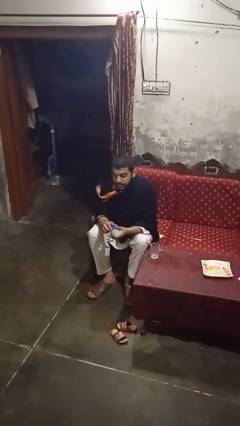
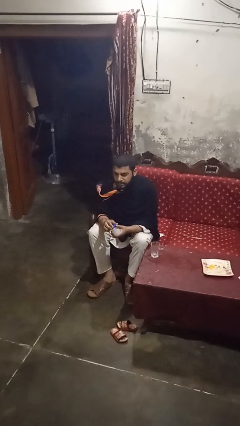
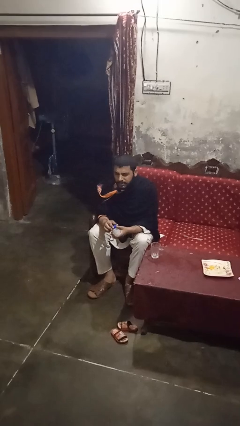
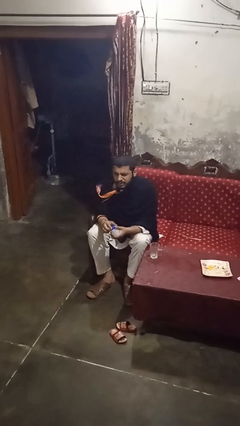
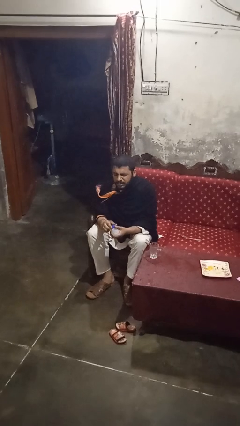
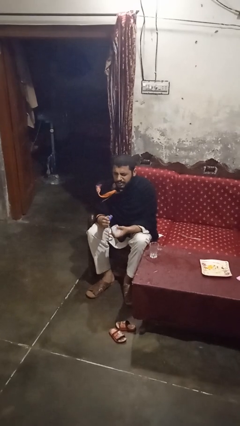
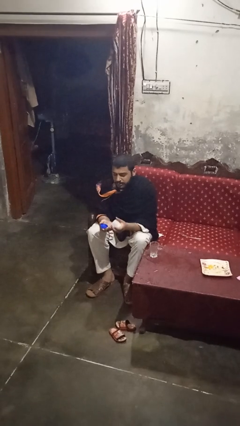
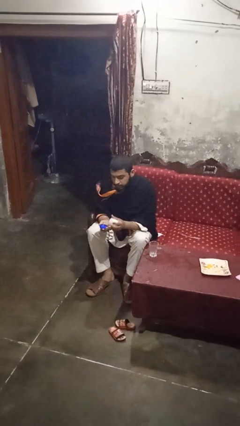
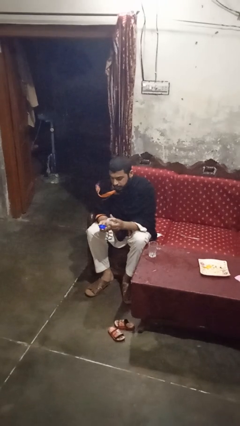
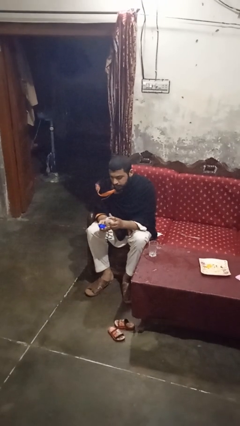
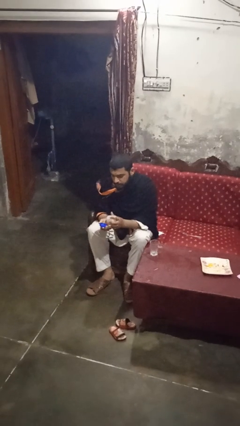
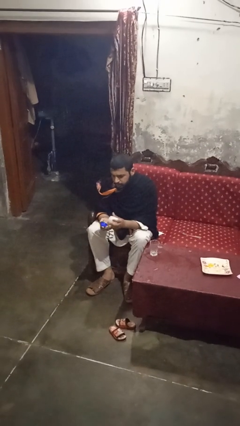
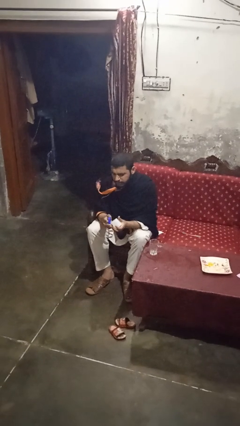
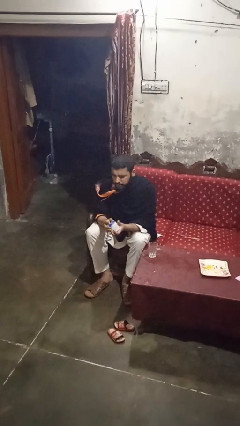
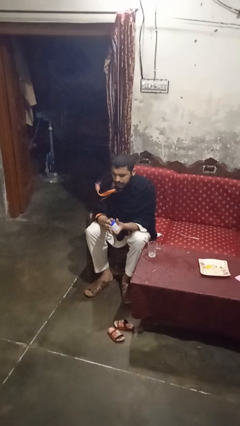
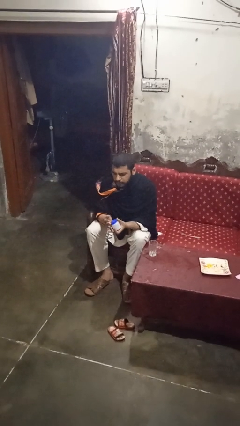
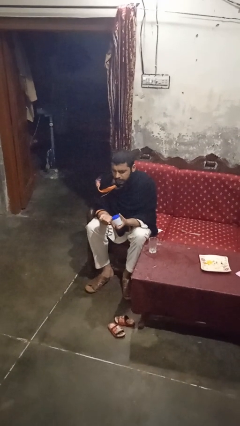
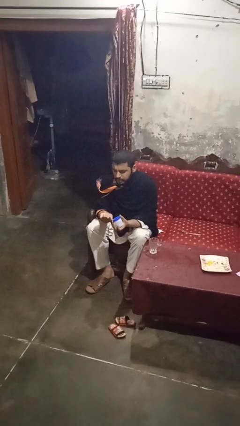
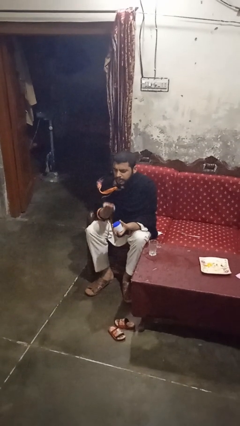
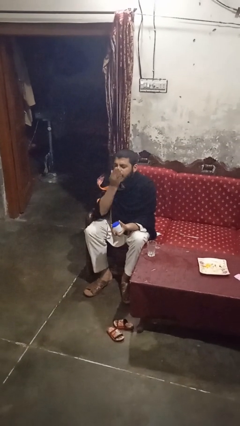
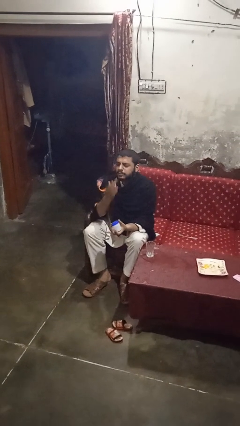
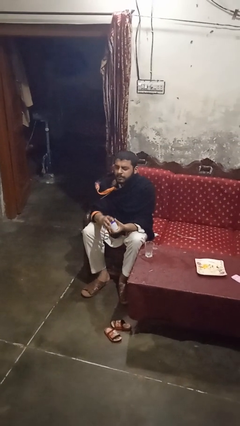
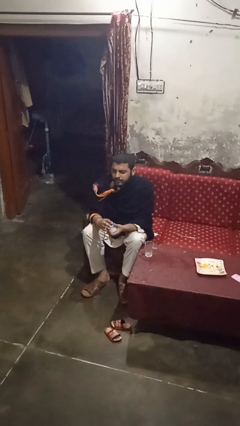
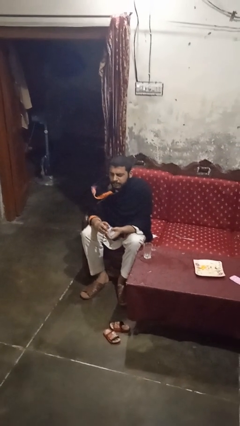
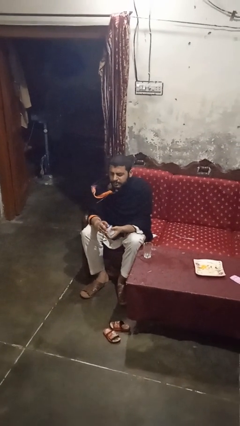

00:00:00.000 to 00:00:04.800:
person takes medicine pills

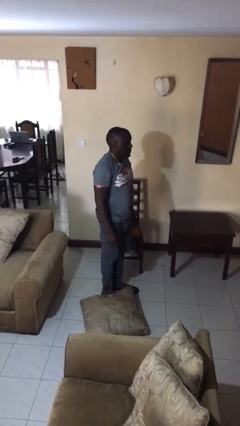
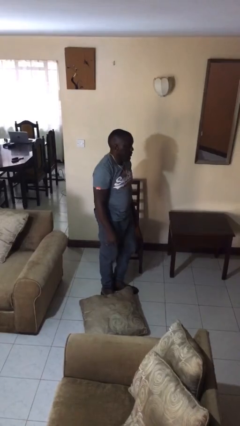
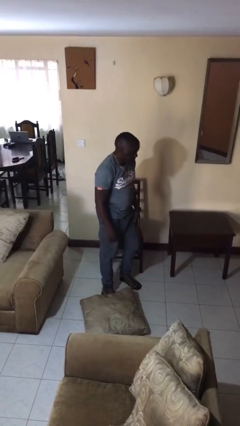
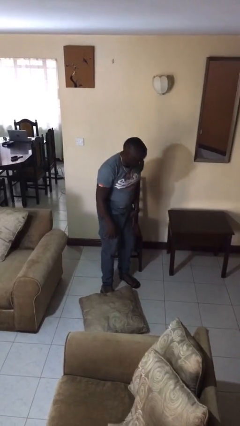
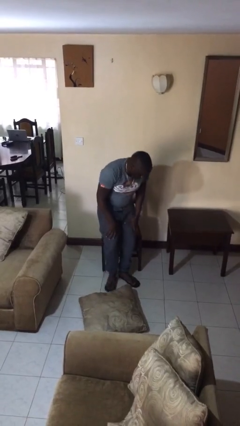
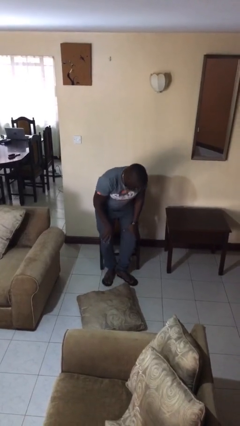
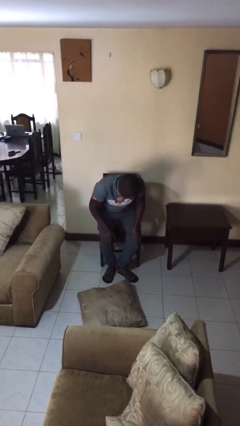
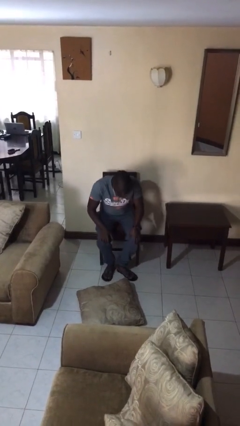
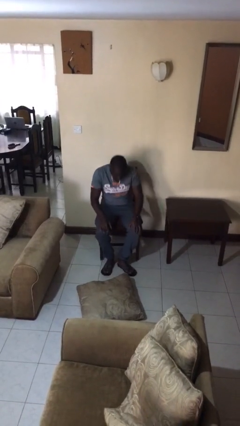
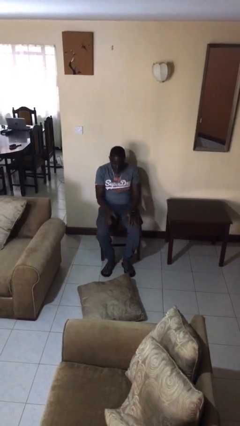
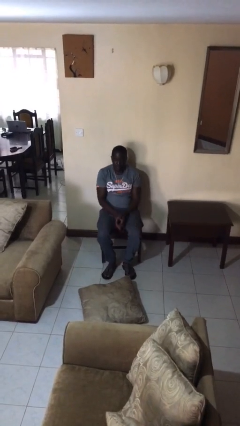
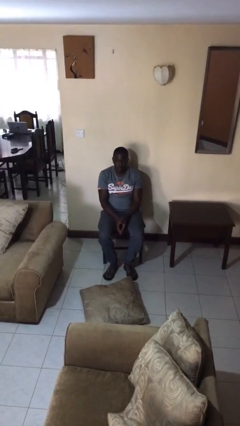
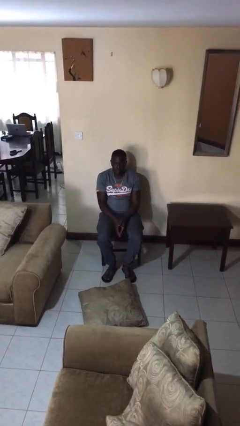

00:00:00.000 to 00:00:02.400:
person sits down

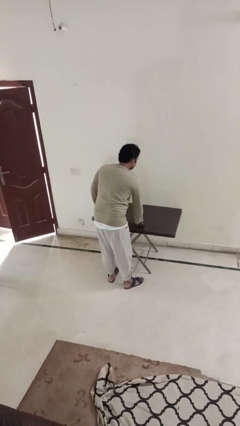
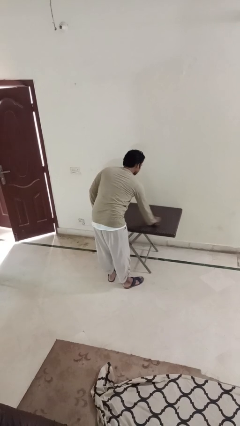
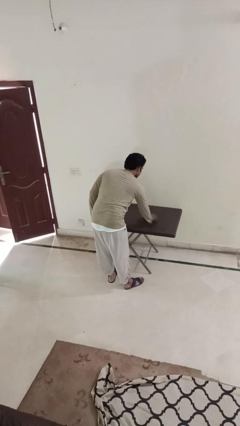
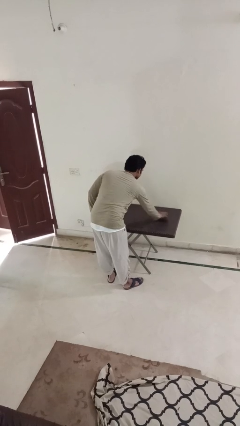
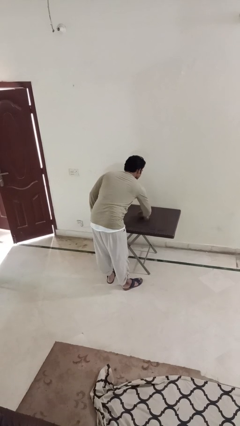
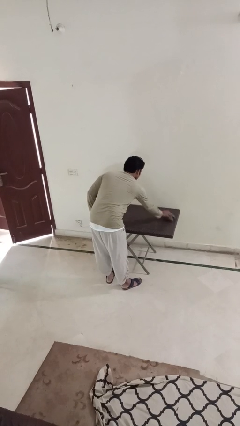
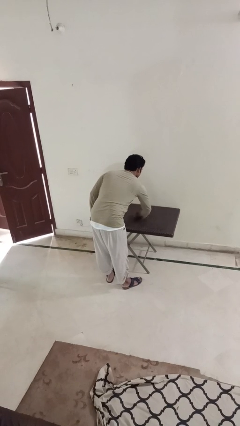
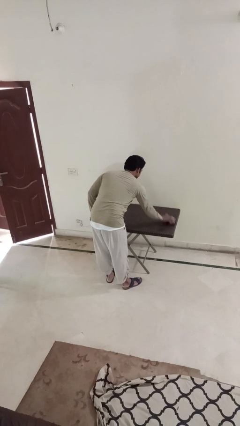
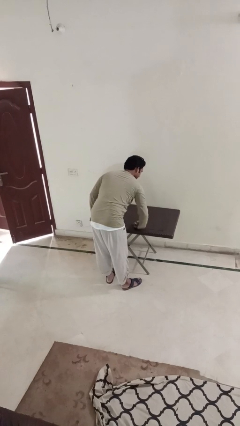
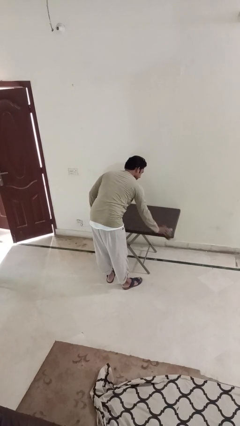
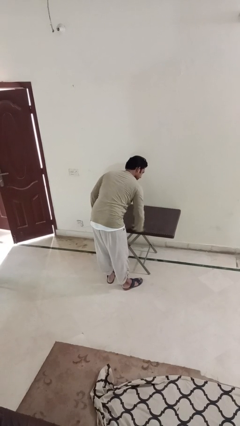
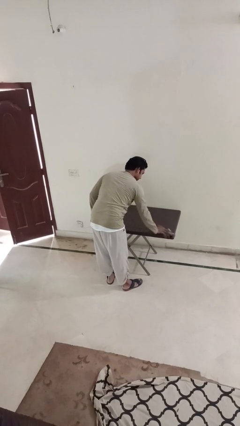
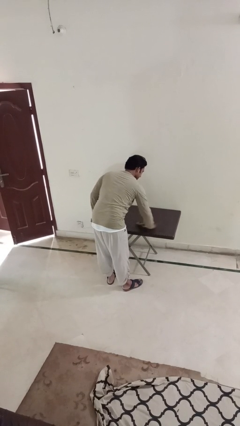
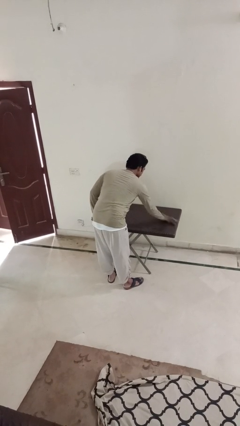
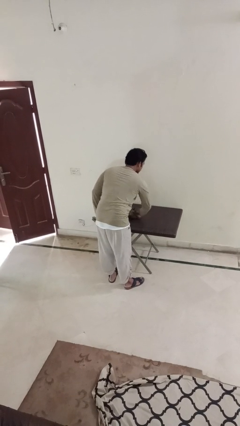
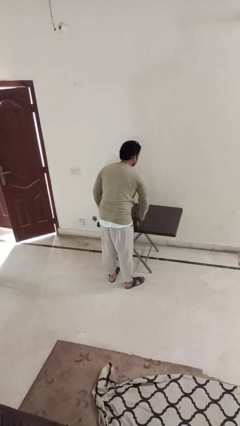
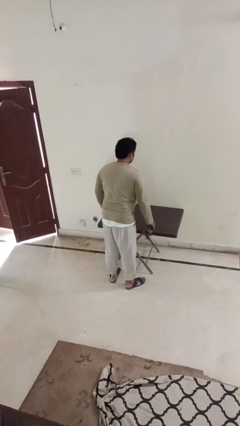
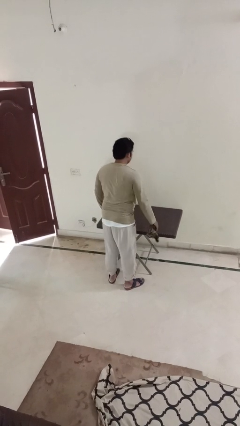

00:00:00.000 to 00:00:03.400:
person cleans table with rag

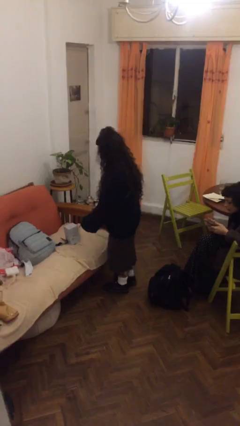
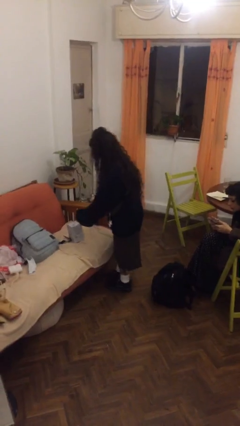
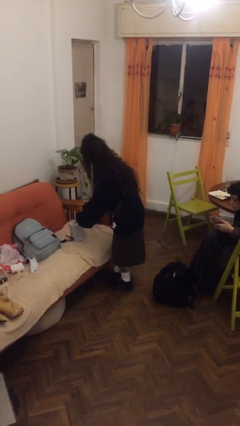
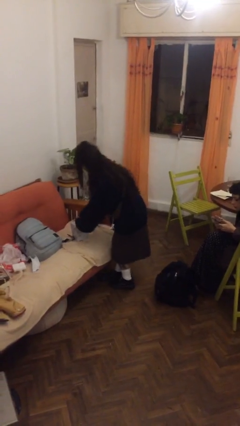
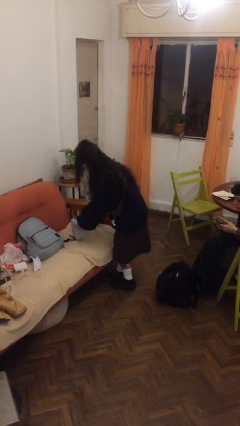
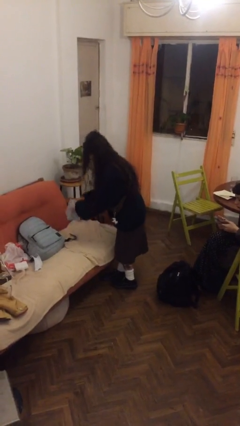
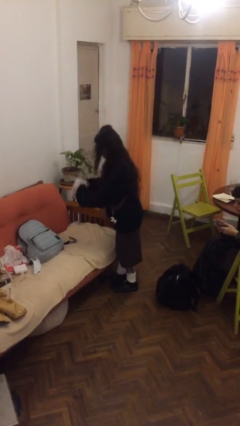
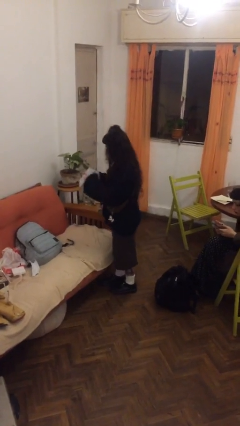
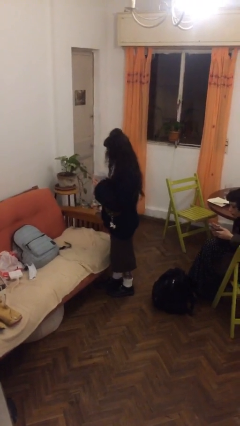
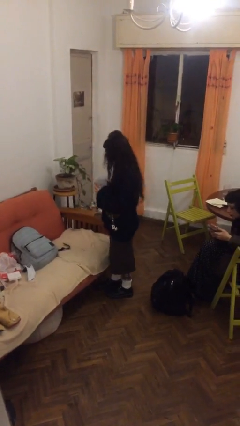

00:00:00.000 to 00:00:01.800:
person picks up object from couch

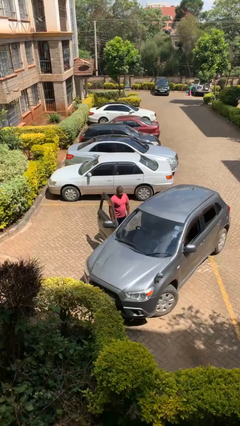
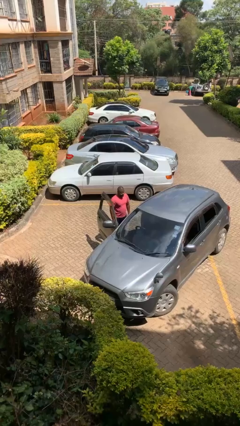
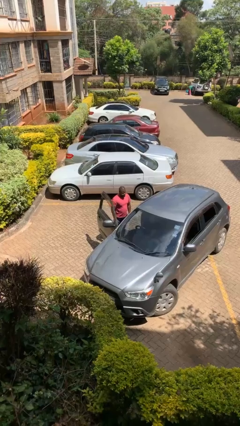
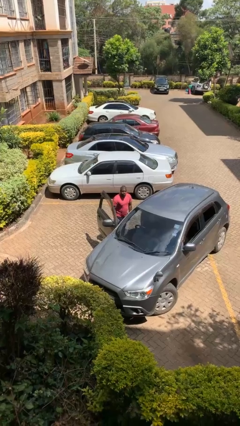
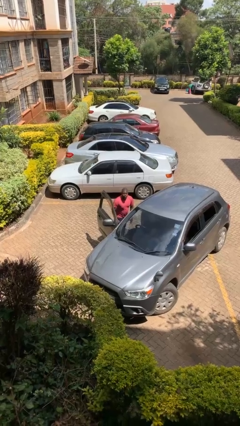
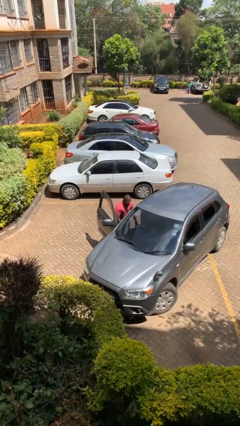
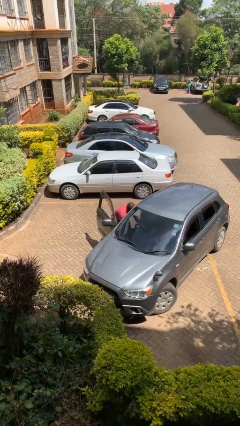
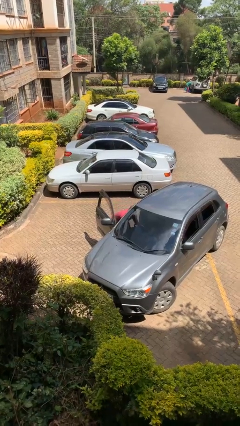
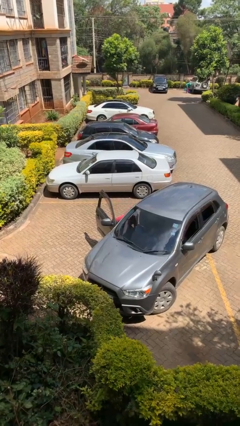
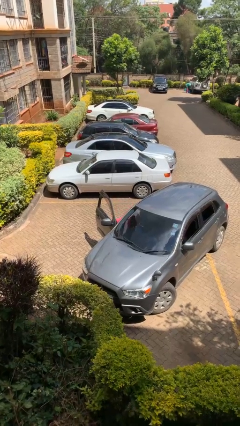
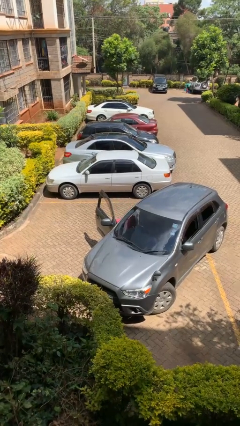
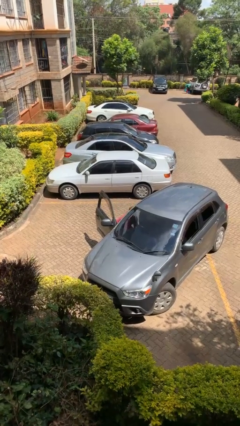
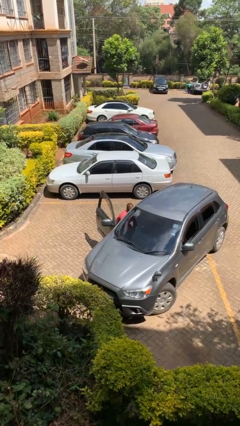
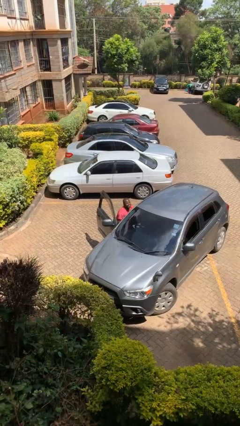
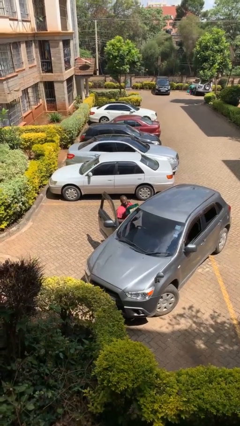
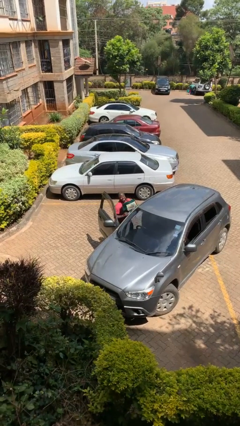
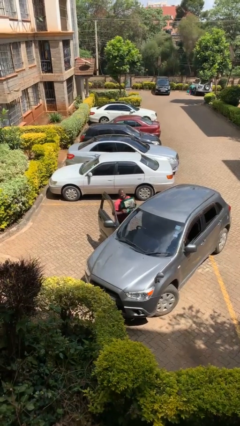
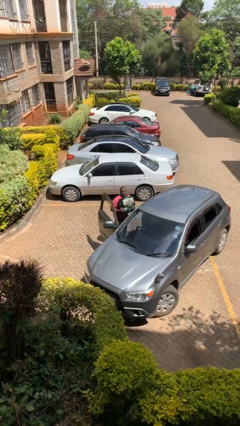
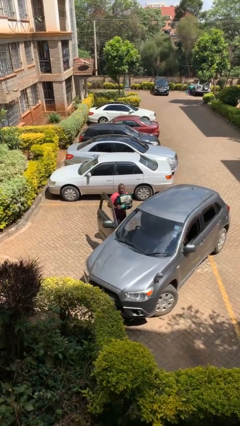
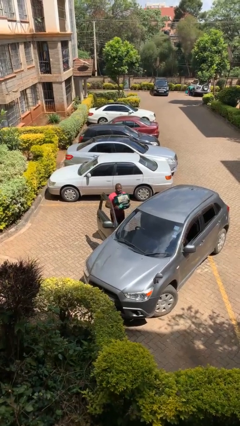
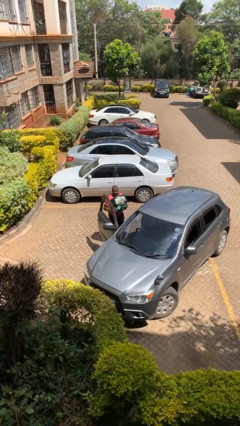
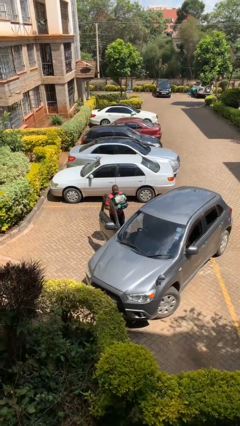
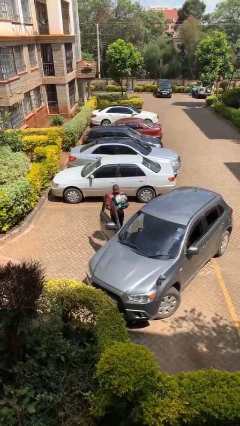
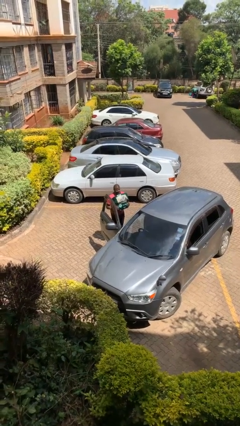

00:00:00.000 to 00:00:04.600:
person unloads car

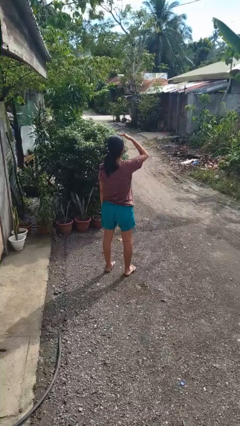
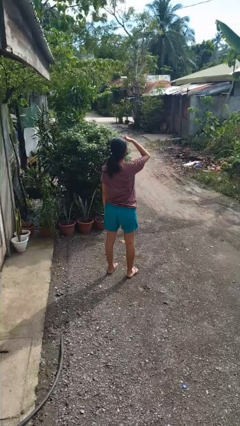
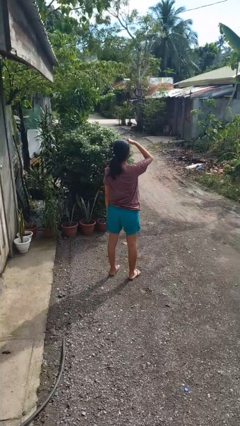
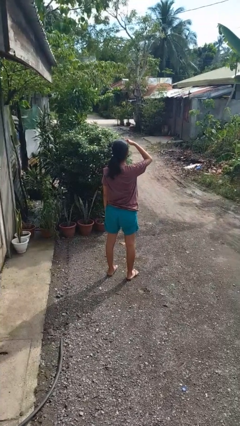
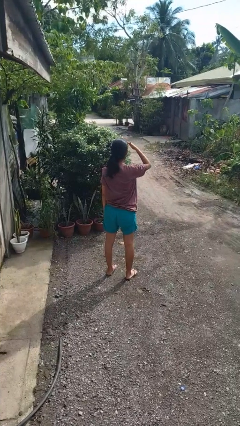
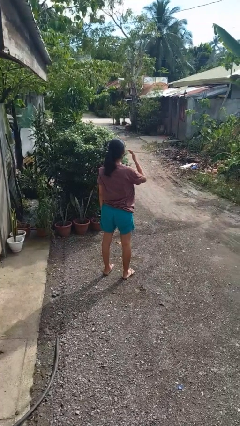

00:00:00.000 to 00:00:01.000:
person shades eyes
